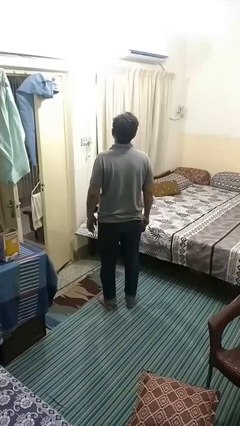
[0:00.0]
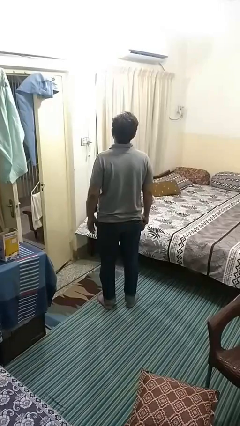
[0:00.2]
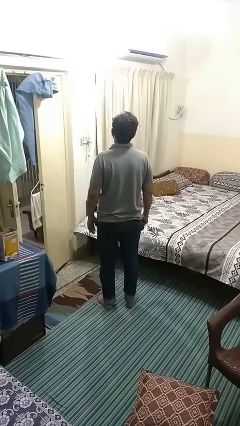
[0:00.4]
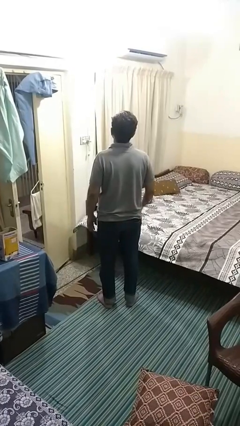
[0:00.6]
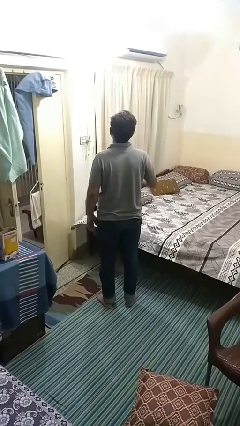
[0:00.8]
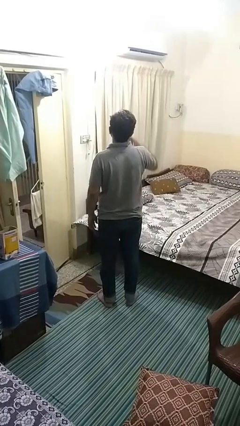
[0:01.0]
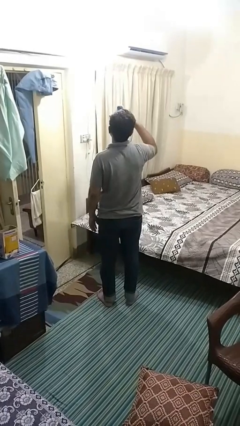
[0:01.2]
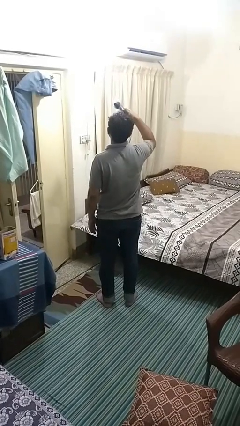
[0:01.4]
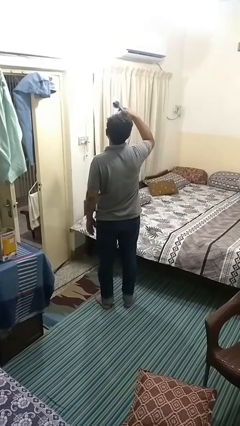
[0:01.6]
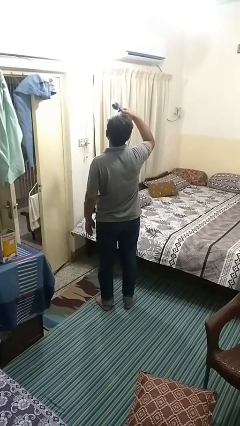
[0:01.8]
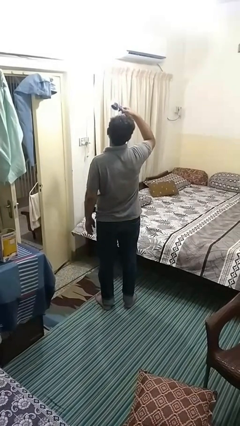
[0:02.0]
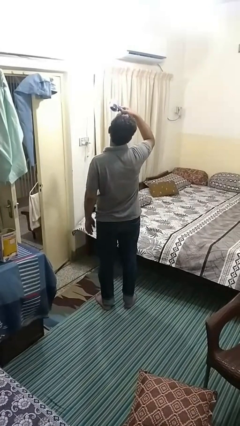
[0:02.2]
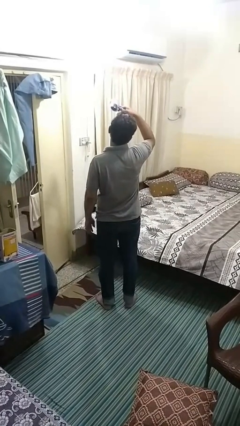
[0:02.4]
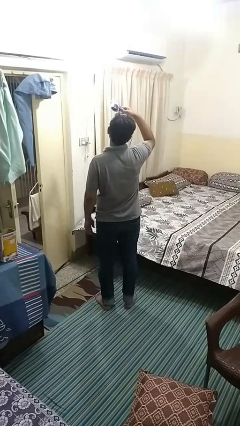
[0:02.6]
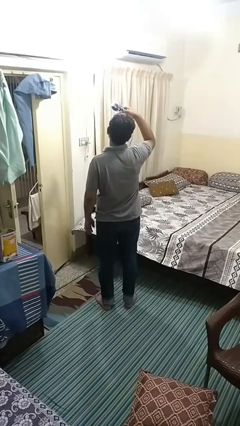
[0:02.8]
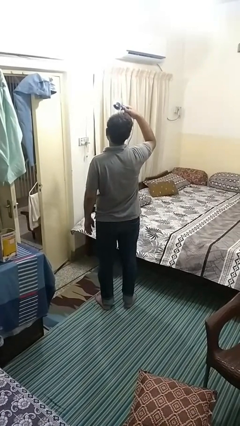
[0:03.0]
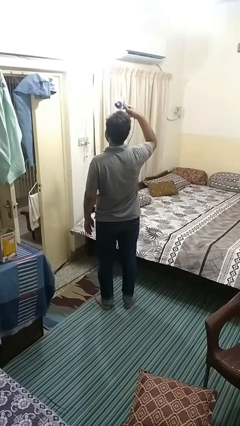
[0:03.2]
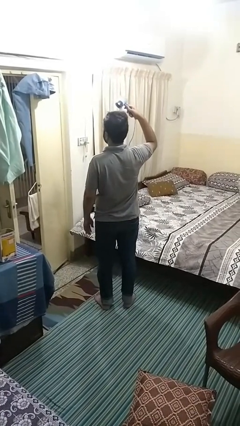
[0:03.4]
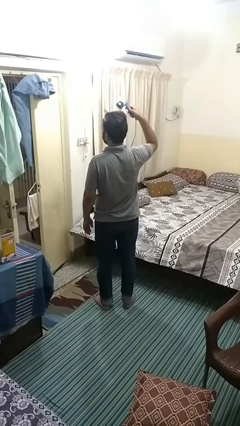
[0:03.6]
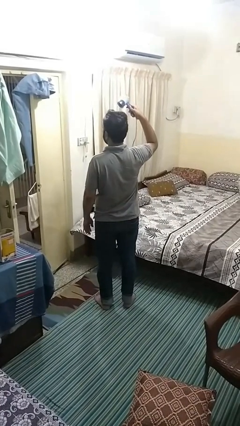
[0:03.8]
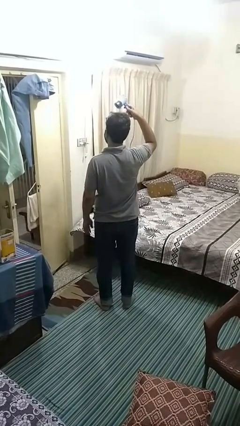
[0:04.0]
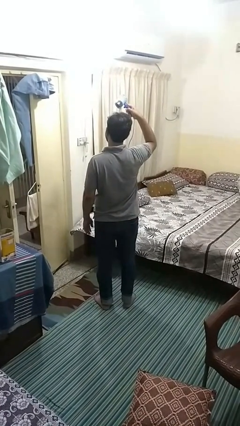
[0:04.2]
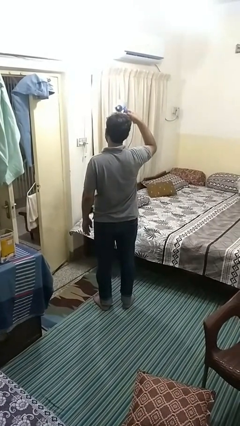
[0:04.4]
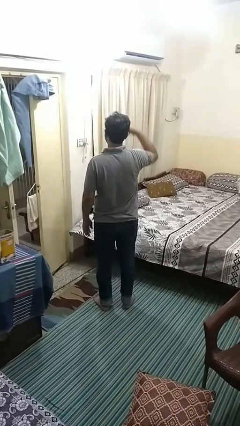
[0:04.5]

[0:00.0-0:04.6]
person dries hair with hairdryer

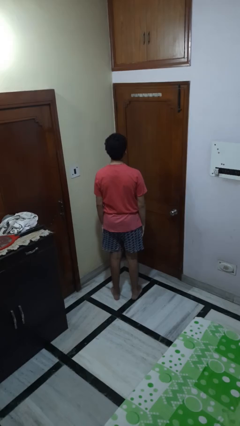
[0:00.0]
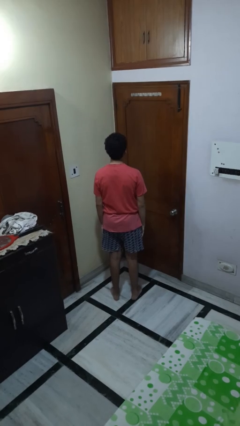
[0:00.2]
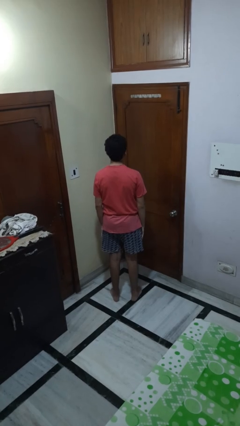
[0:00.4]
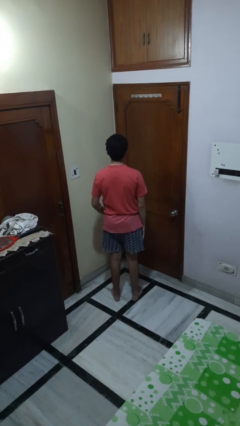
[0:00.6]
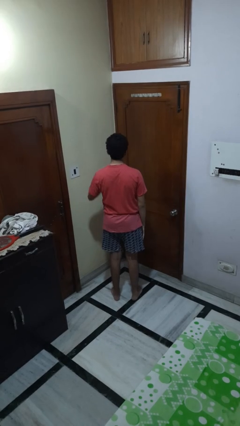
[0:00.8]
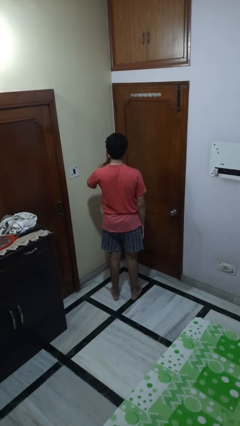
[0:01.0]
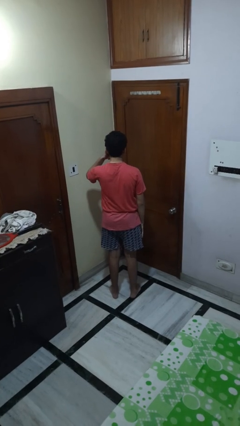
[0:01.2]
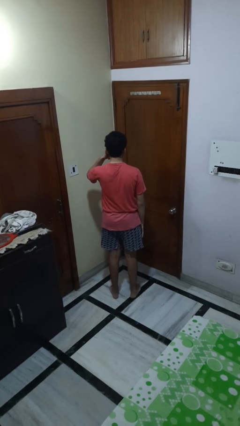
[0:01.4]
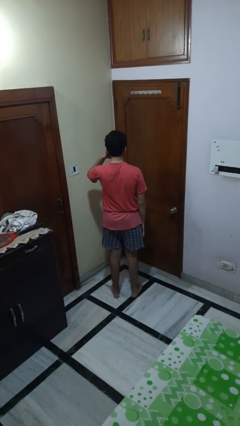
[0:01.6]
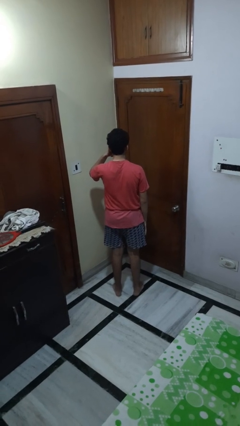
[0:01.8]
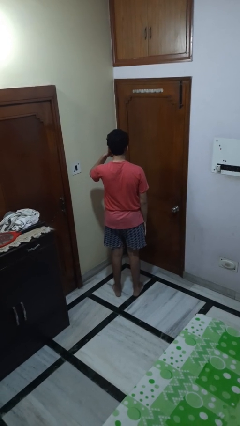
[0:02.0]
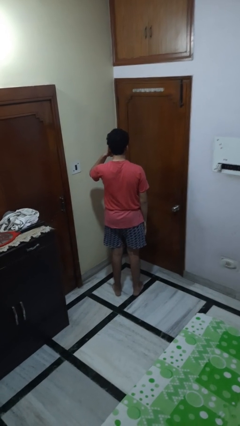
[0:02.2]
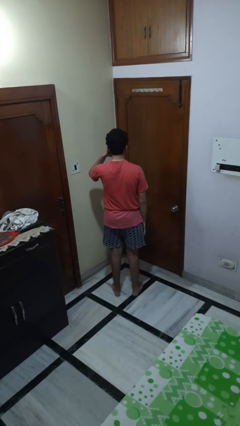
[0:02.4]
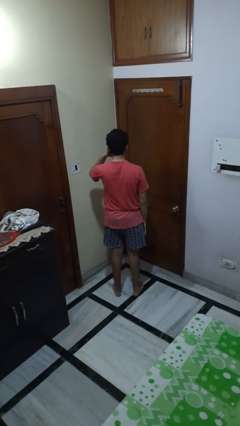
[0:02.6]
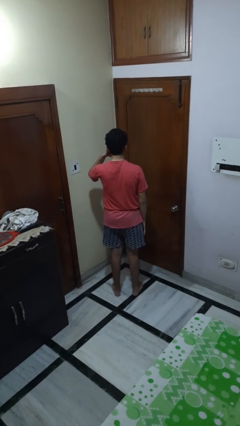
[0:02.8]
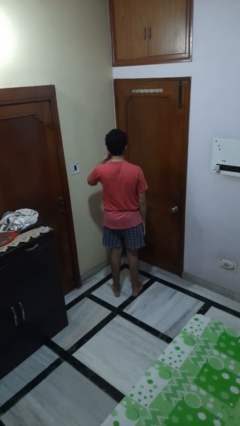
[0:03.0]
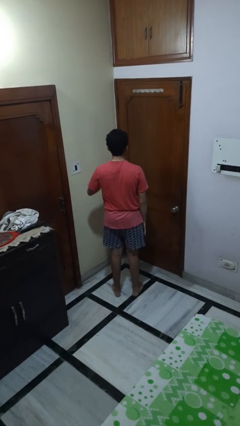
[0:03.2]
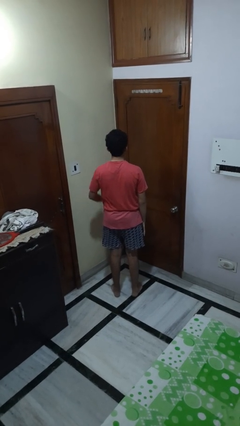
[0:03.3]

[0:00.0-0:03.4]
person gestures call me

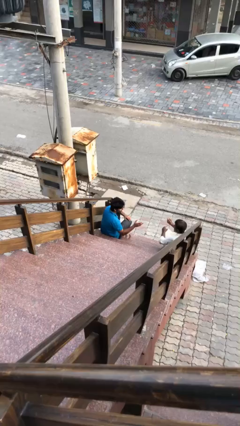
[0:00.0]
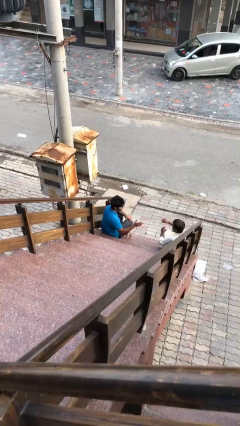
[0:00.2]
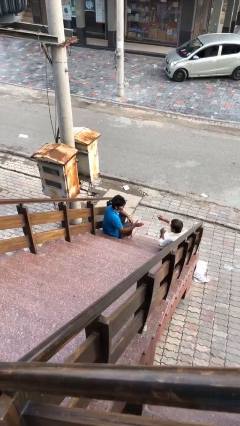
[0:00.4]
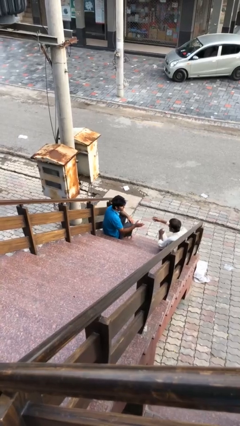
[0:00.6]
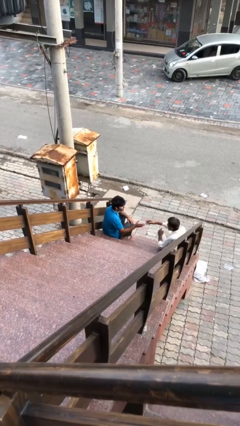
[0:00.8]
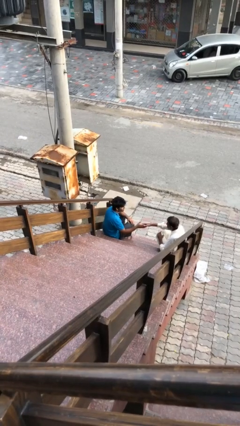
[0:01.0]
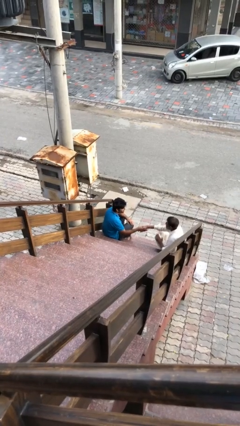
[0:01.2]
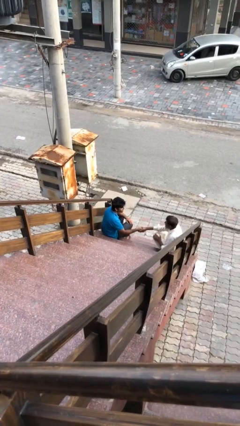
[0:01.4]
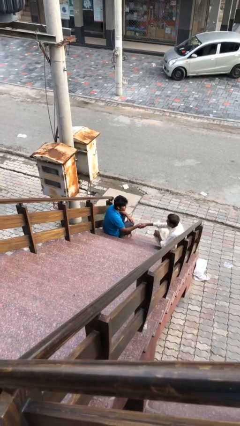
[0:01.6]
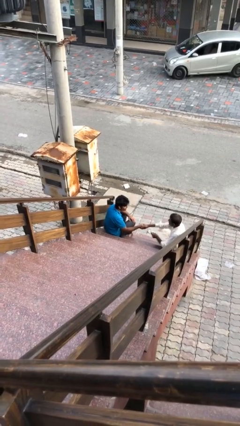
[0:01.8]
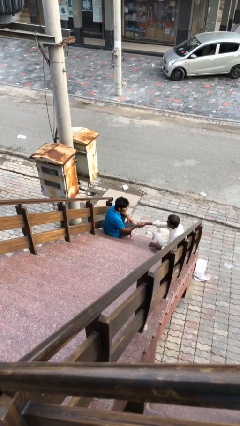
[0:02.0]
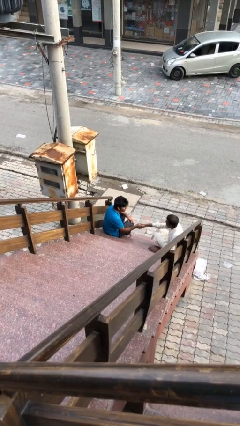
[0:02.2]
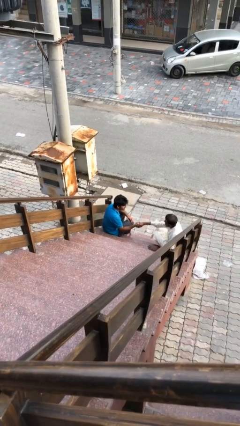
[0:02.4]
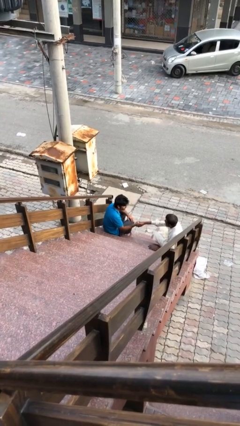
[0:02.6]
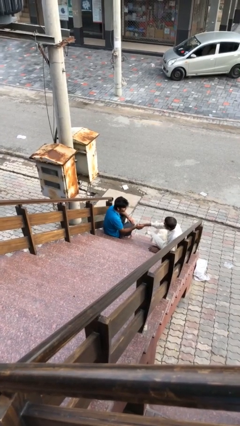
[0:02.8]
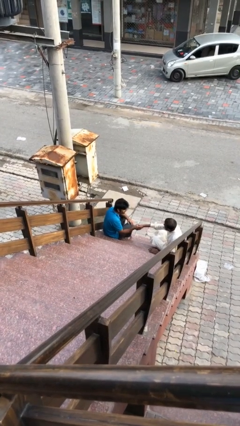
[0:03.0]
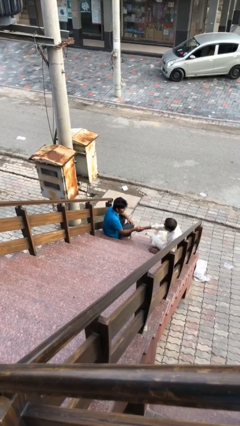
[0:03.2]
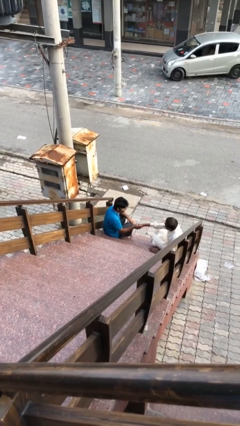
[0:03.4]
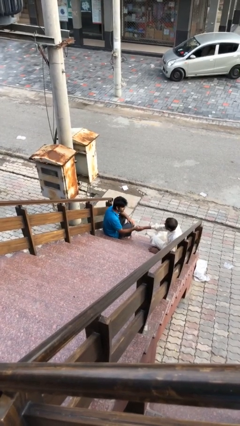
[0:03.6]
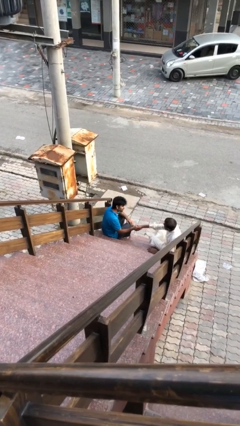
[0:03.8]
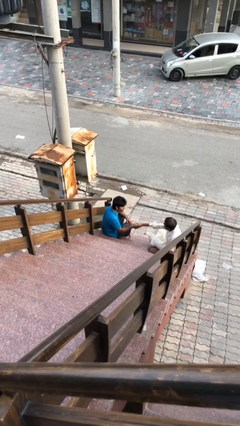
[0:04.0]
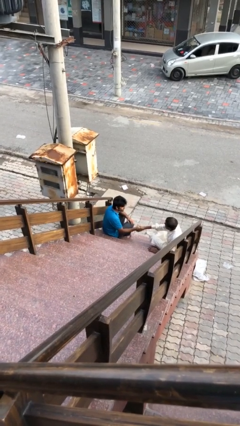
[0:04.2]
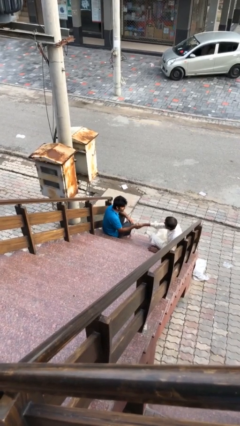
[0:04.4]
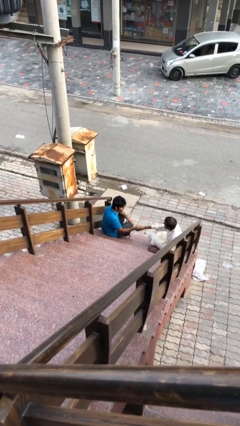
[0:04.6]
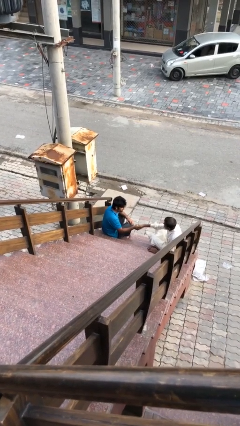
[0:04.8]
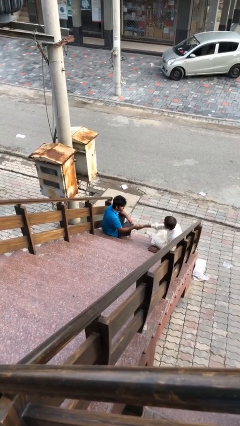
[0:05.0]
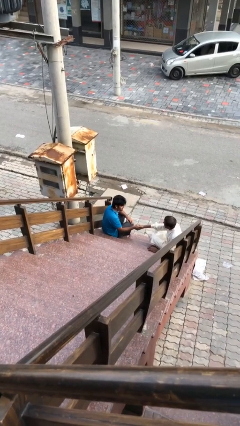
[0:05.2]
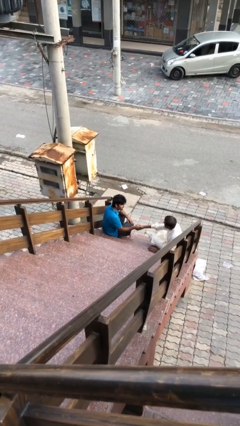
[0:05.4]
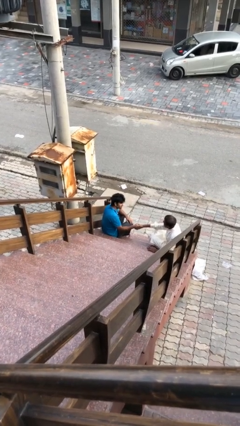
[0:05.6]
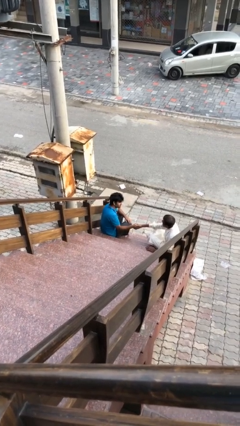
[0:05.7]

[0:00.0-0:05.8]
person shakes hand

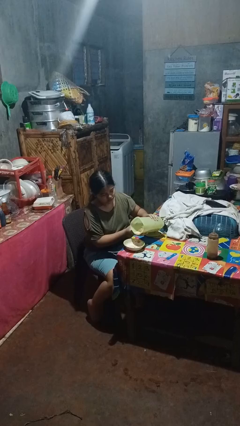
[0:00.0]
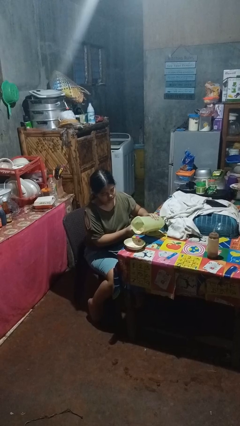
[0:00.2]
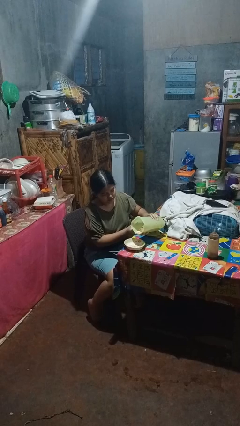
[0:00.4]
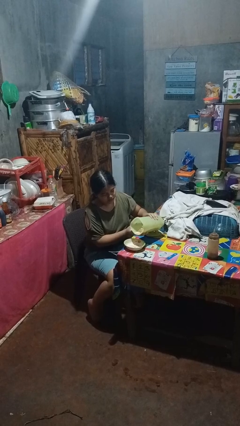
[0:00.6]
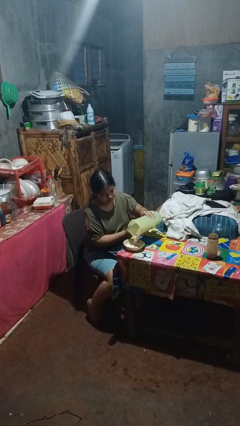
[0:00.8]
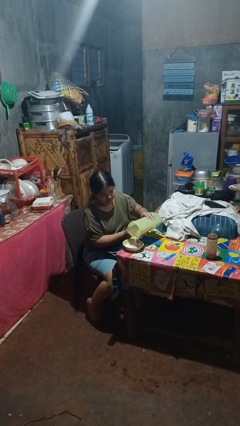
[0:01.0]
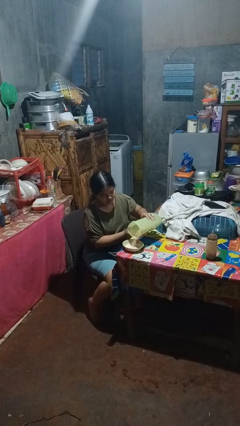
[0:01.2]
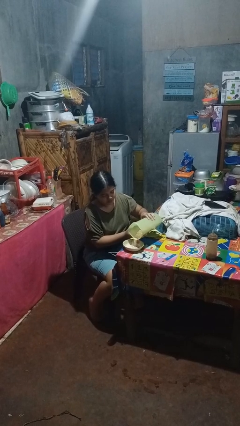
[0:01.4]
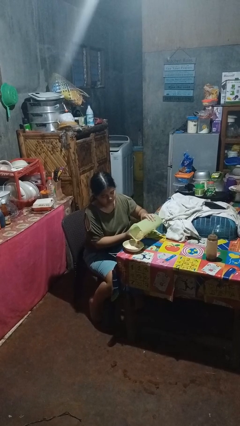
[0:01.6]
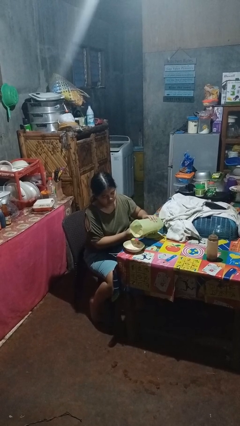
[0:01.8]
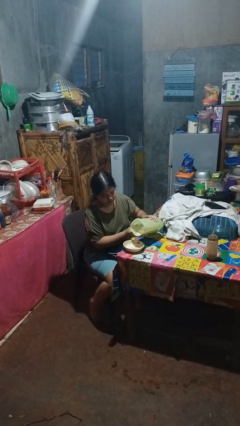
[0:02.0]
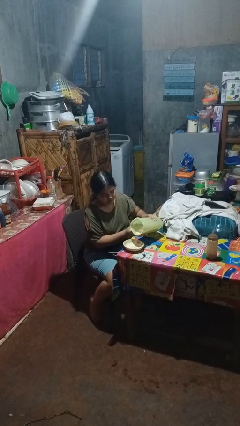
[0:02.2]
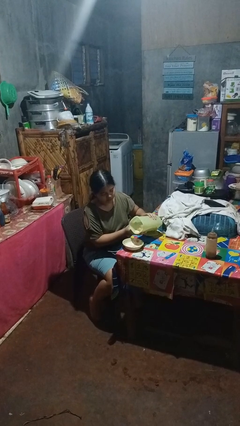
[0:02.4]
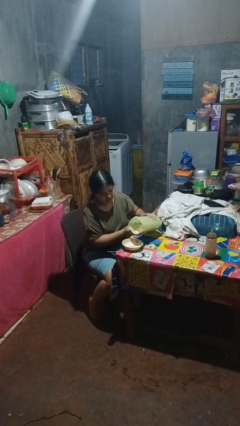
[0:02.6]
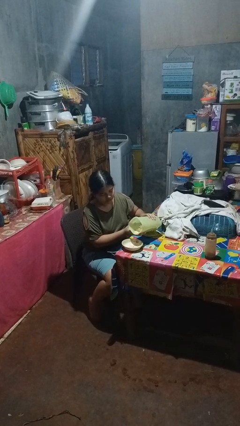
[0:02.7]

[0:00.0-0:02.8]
person pours into bowl

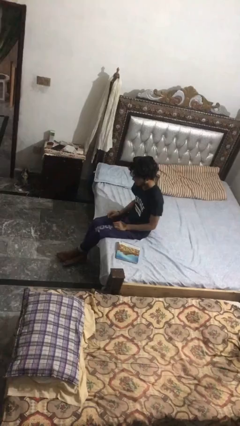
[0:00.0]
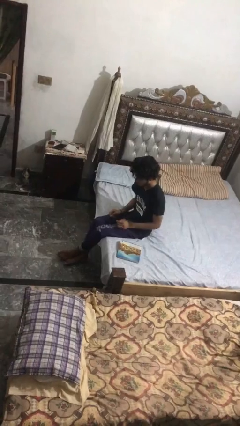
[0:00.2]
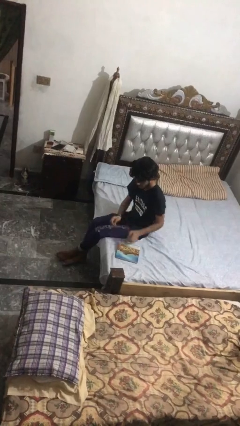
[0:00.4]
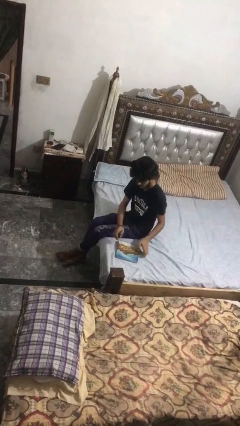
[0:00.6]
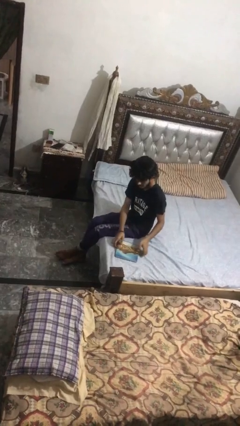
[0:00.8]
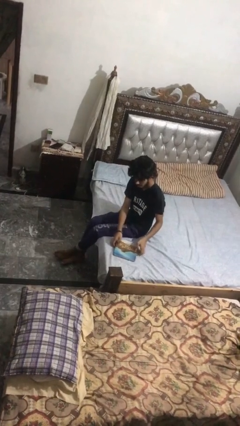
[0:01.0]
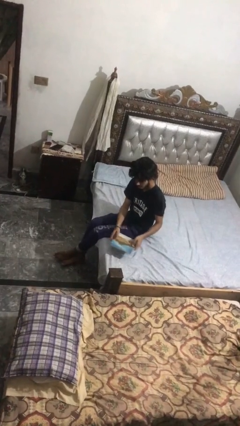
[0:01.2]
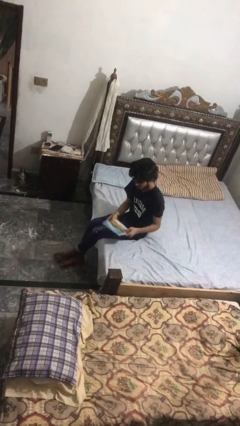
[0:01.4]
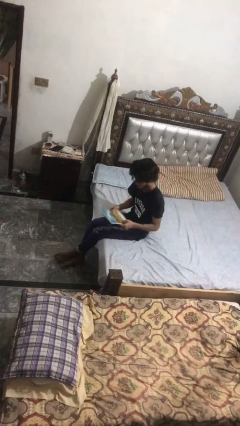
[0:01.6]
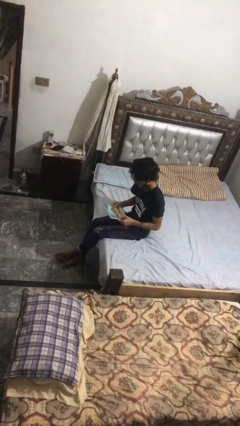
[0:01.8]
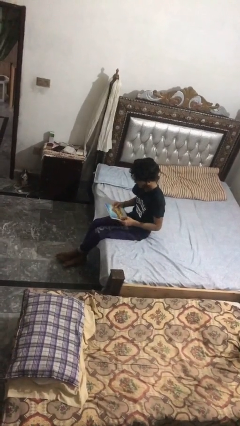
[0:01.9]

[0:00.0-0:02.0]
person picks up object from bed
